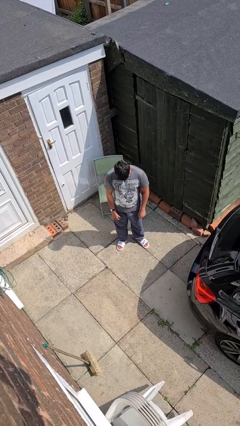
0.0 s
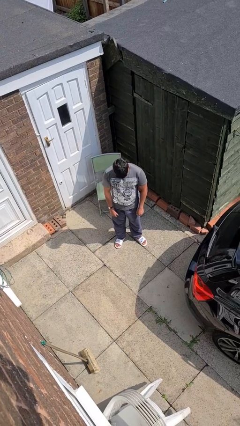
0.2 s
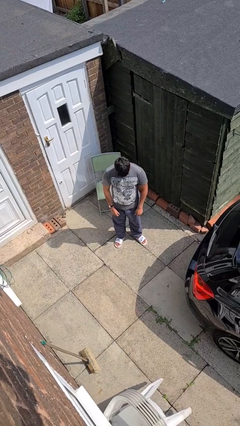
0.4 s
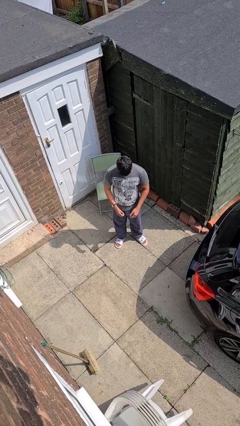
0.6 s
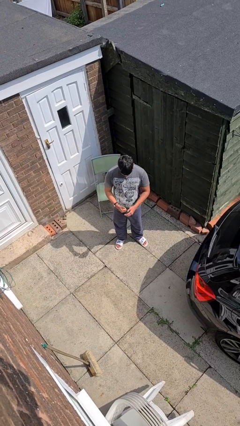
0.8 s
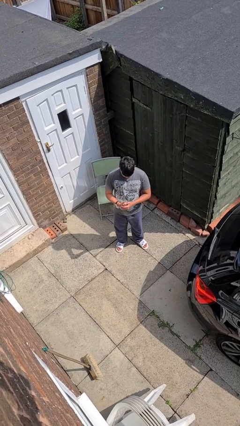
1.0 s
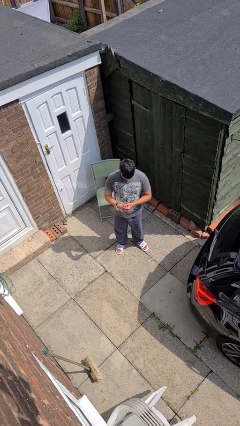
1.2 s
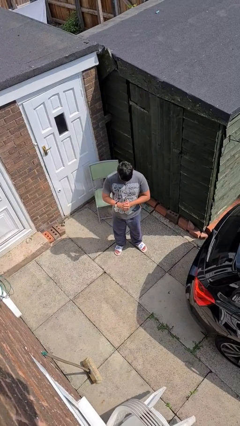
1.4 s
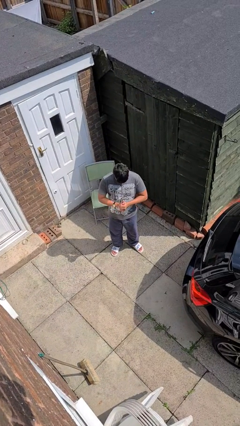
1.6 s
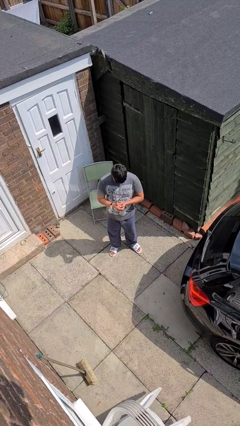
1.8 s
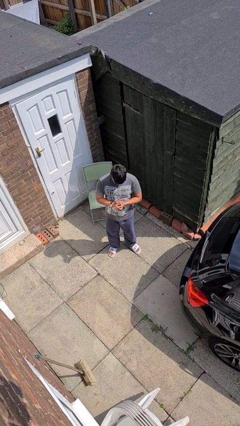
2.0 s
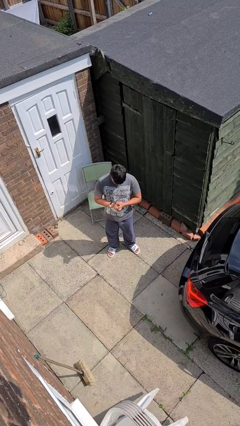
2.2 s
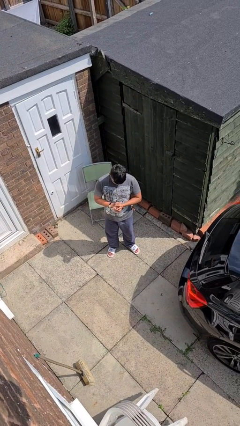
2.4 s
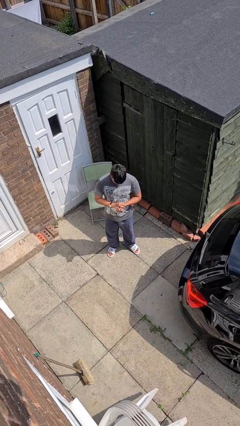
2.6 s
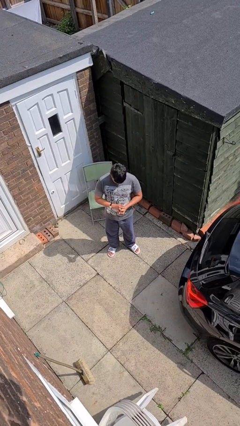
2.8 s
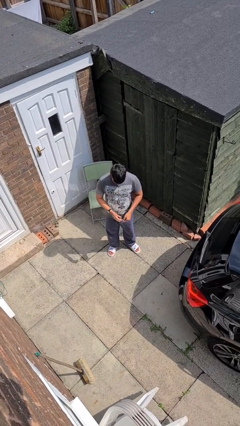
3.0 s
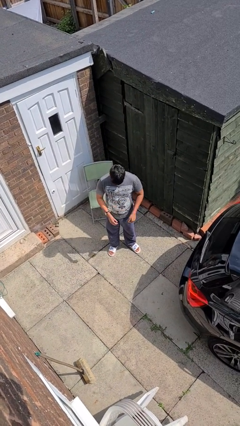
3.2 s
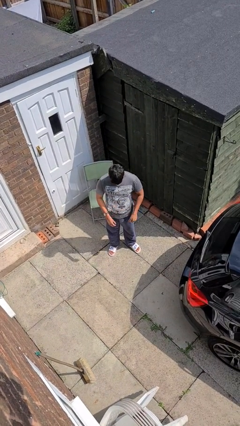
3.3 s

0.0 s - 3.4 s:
person cracks knuckles

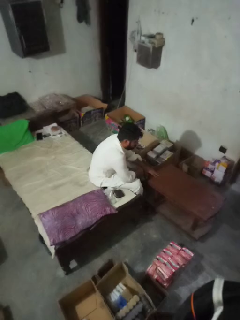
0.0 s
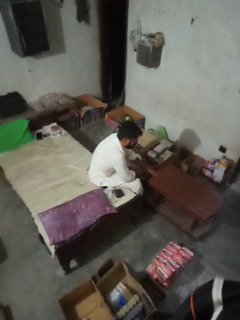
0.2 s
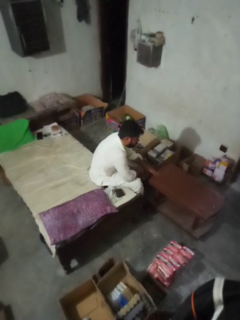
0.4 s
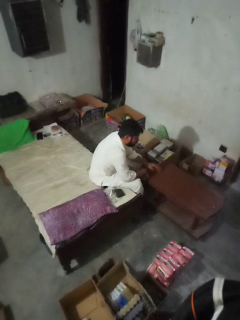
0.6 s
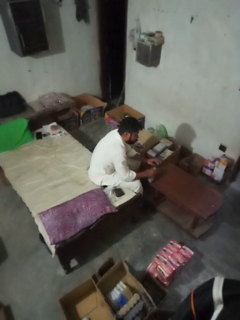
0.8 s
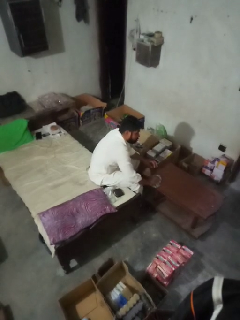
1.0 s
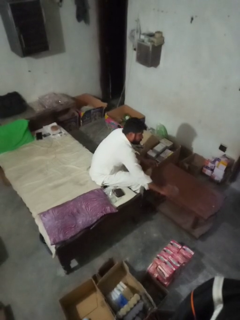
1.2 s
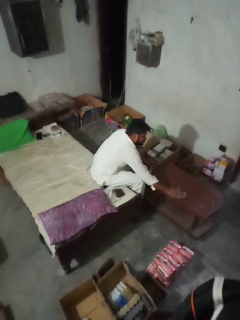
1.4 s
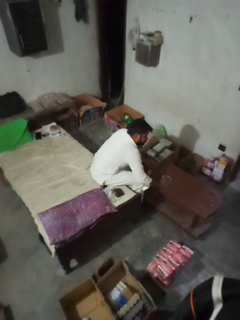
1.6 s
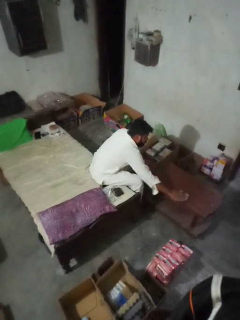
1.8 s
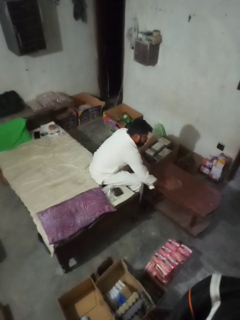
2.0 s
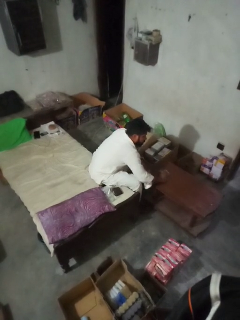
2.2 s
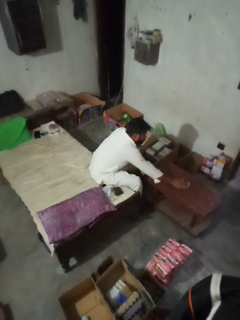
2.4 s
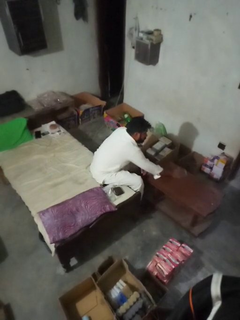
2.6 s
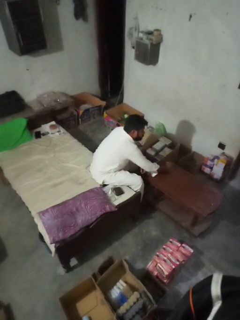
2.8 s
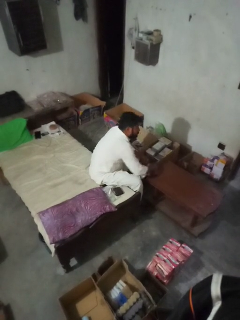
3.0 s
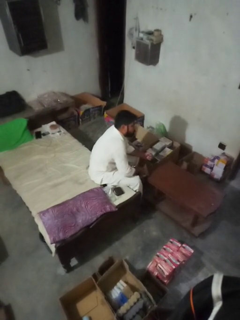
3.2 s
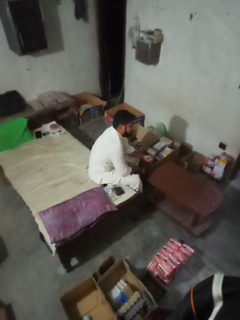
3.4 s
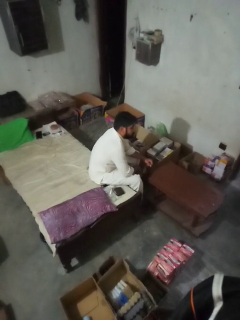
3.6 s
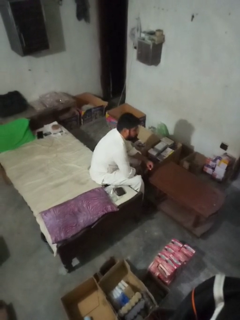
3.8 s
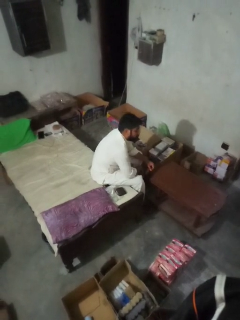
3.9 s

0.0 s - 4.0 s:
person cleans table with rag

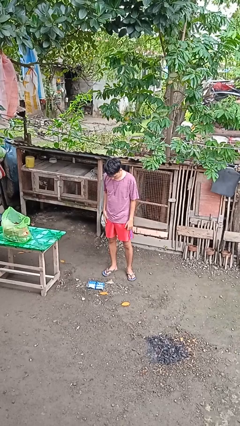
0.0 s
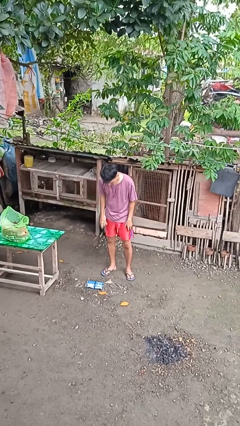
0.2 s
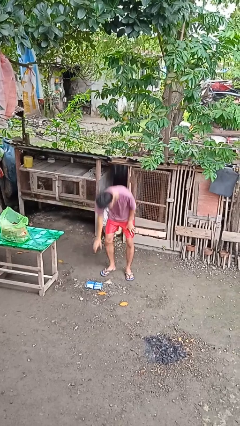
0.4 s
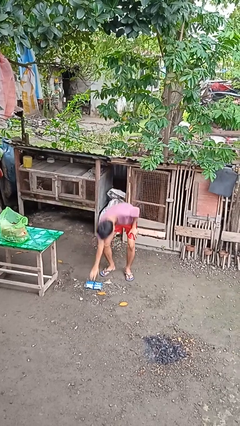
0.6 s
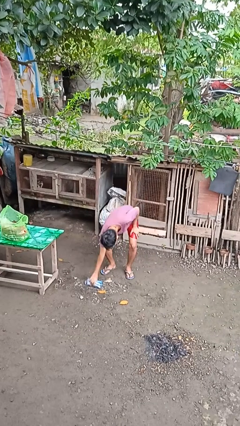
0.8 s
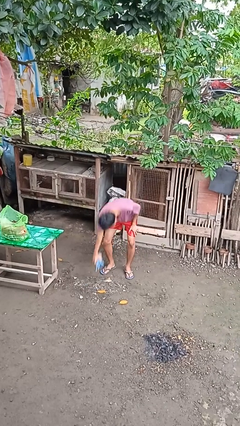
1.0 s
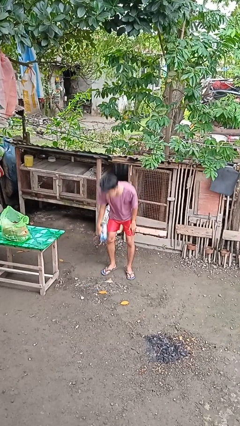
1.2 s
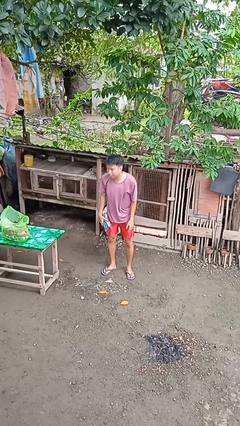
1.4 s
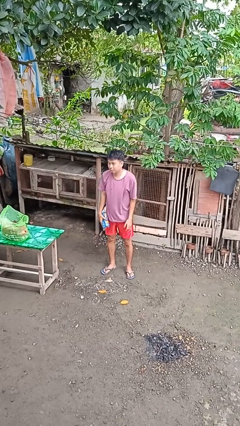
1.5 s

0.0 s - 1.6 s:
person picks up object from floor

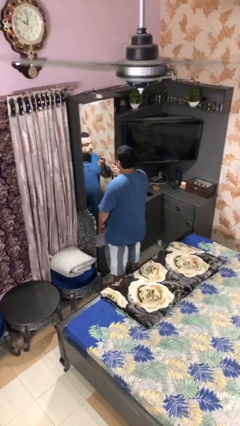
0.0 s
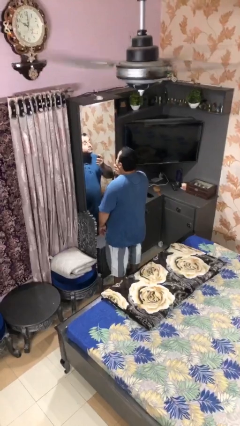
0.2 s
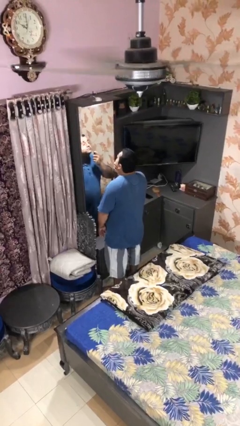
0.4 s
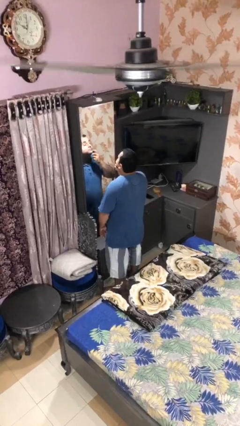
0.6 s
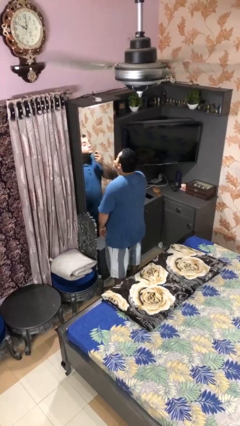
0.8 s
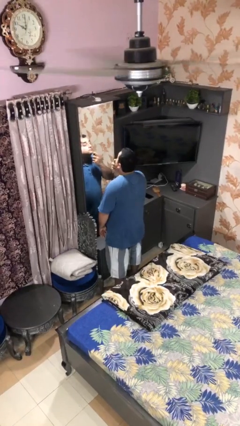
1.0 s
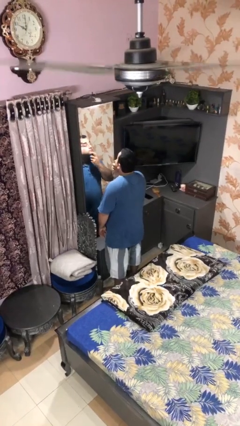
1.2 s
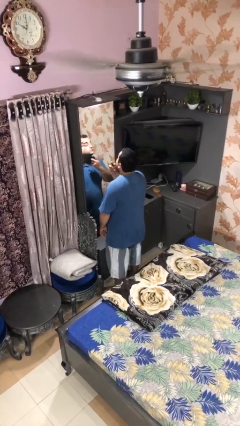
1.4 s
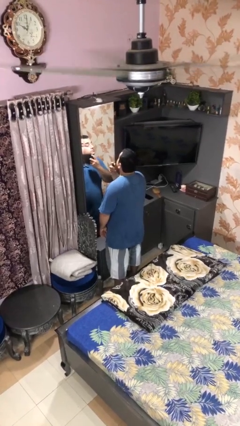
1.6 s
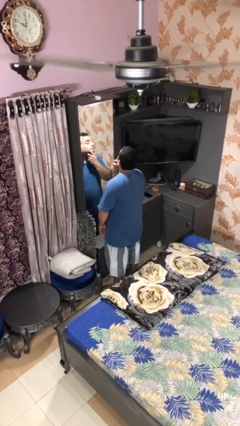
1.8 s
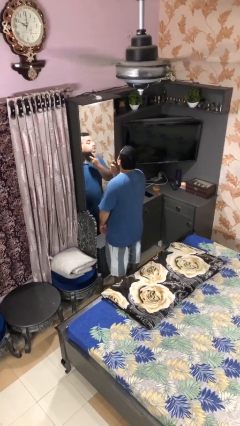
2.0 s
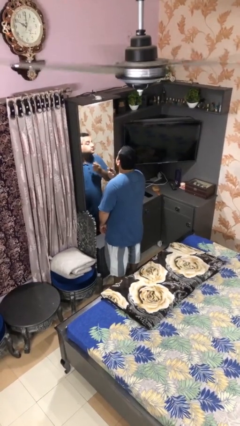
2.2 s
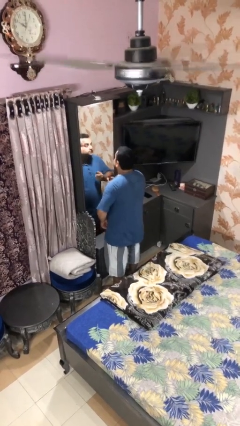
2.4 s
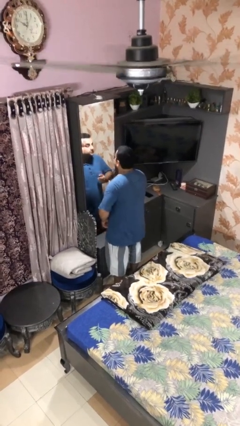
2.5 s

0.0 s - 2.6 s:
person applies foundation makeup

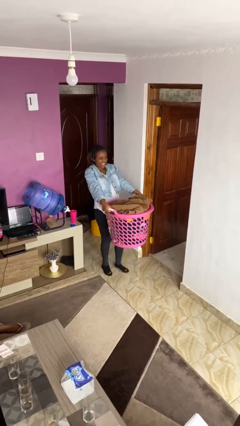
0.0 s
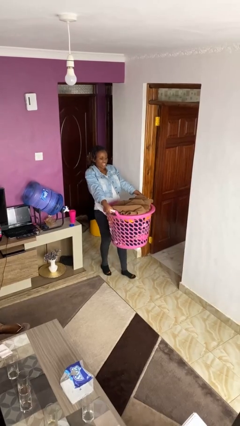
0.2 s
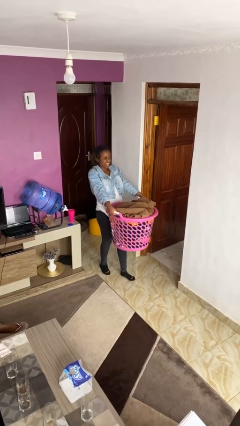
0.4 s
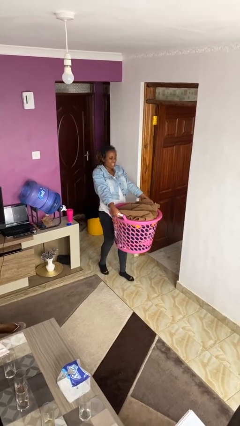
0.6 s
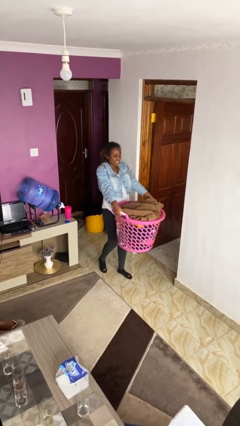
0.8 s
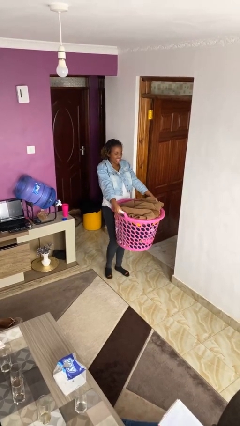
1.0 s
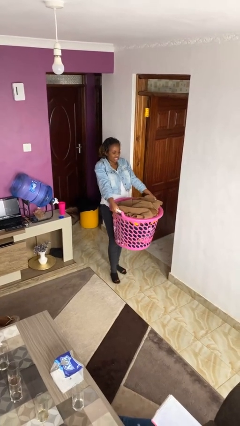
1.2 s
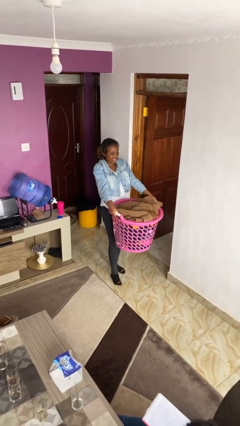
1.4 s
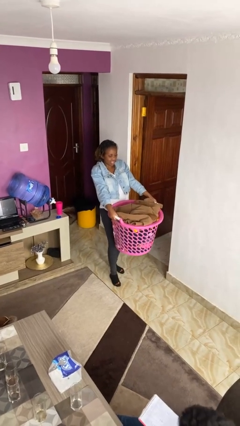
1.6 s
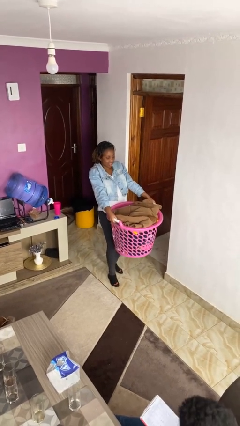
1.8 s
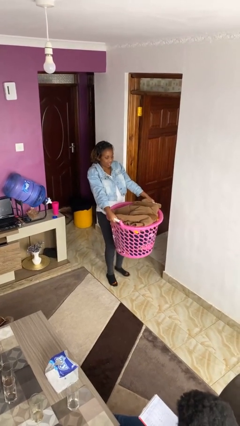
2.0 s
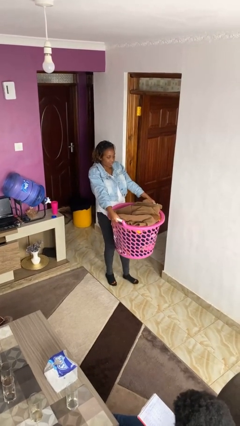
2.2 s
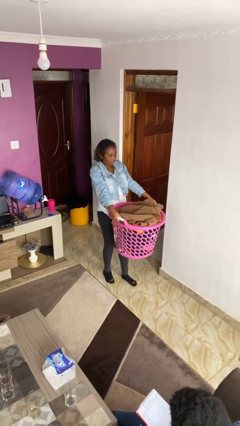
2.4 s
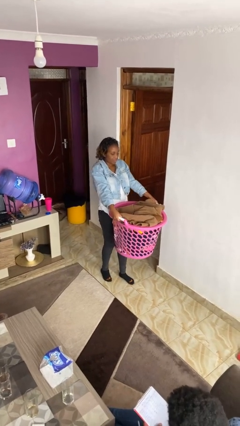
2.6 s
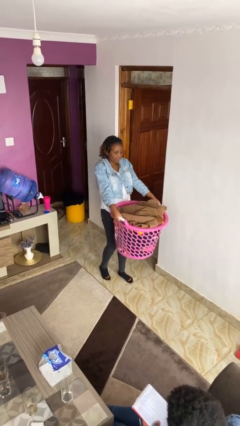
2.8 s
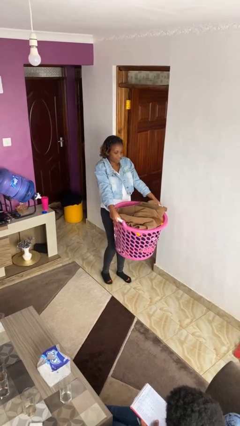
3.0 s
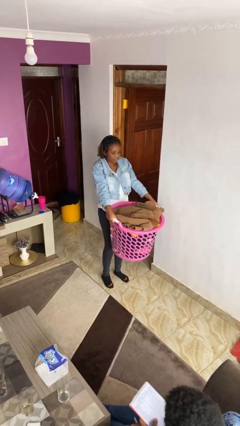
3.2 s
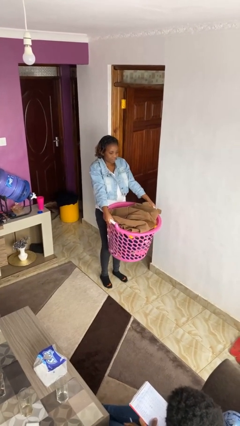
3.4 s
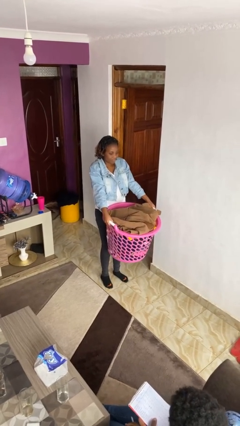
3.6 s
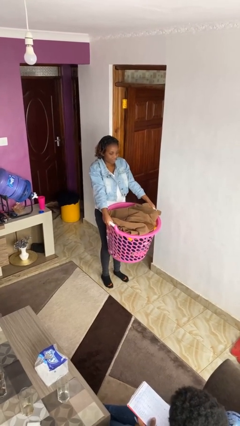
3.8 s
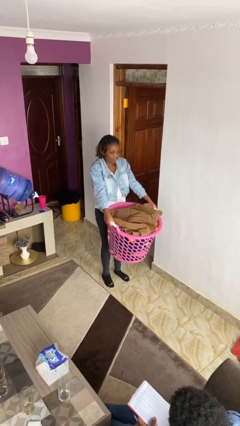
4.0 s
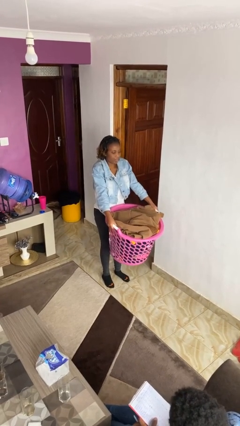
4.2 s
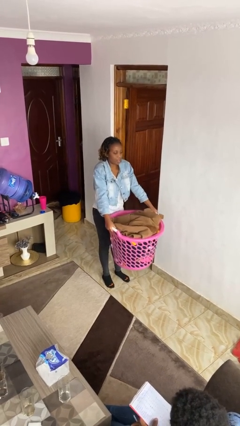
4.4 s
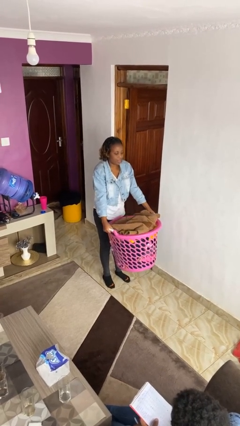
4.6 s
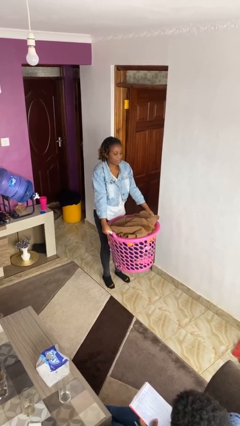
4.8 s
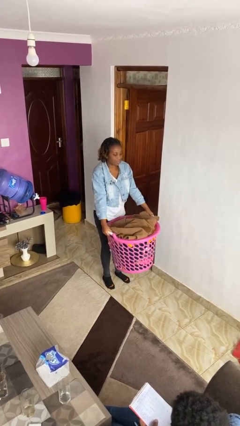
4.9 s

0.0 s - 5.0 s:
person carries laundry basket

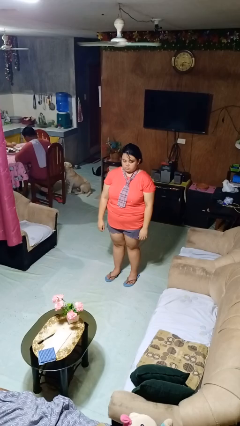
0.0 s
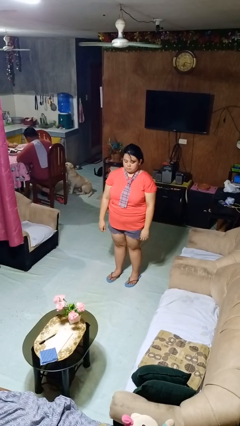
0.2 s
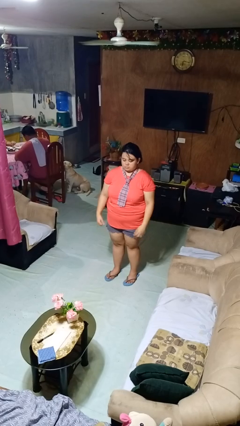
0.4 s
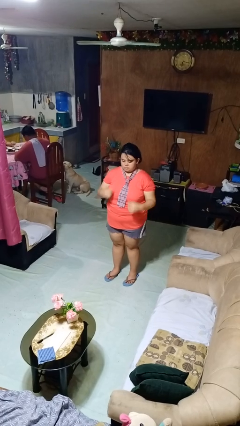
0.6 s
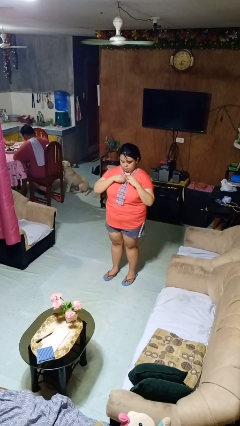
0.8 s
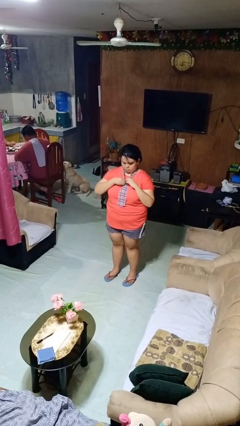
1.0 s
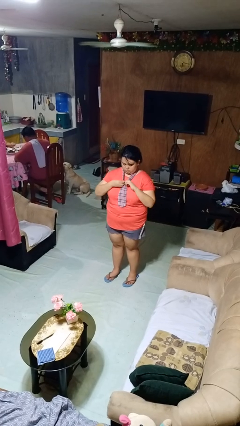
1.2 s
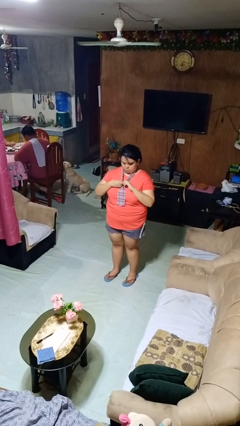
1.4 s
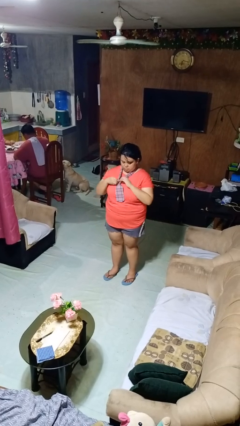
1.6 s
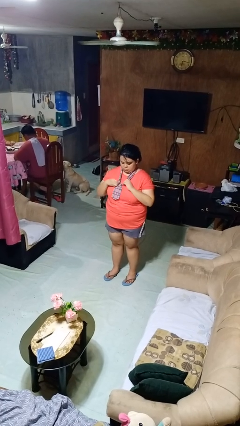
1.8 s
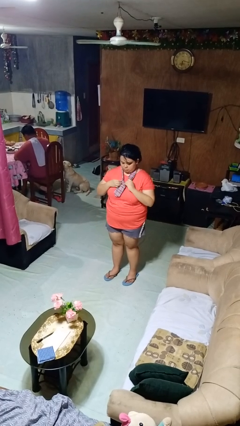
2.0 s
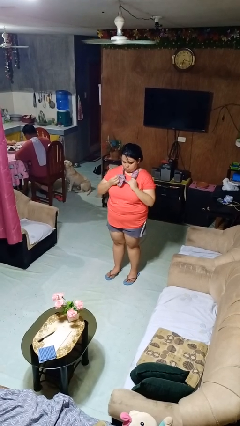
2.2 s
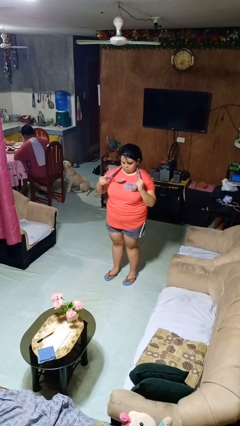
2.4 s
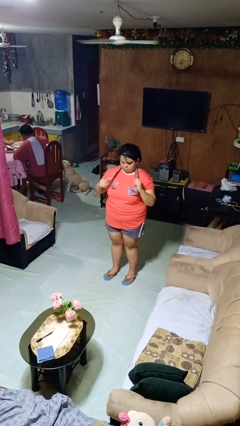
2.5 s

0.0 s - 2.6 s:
person takes off necktie
